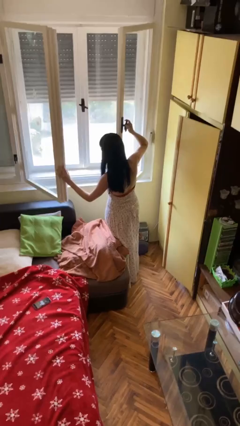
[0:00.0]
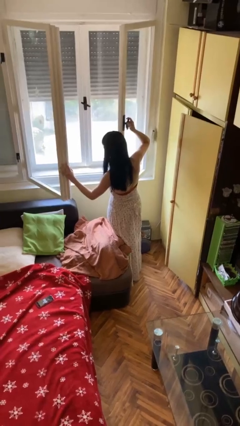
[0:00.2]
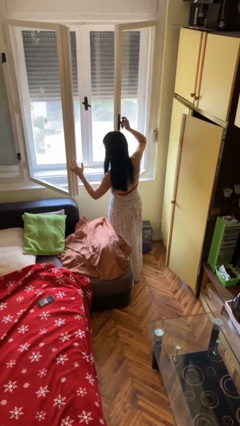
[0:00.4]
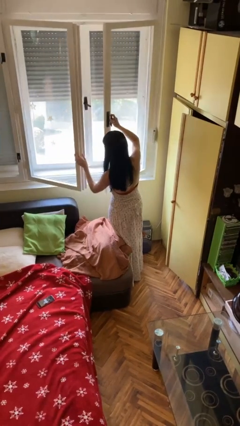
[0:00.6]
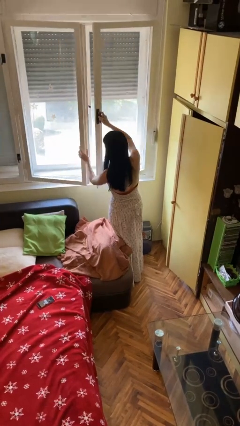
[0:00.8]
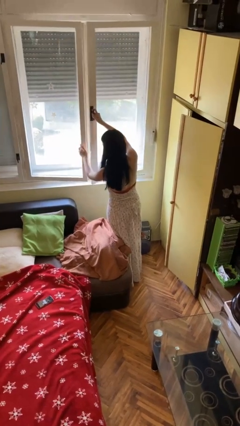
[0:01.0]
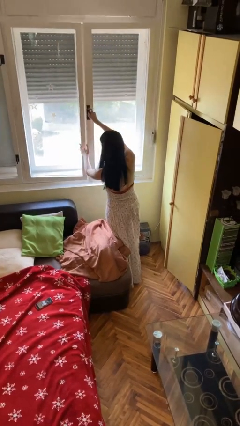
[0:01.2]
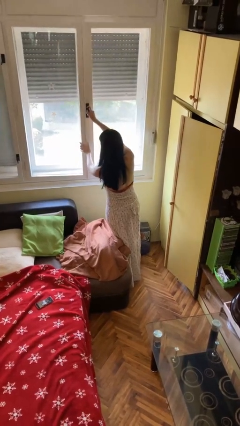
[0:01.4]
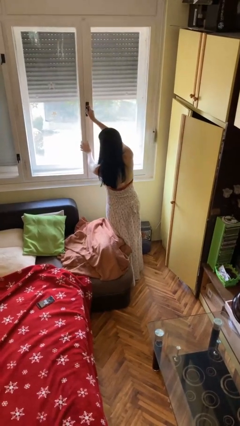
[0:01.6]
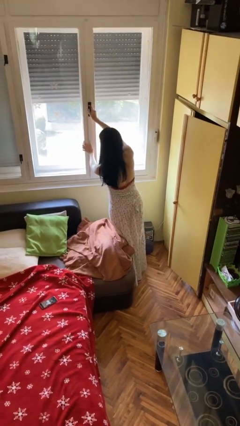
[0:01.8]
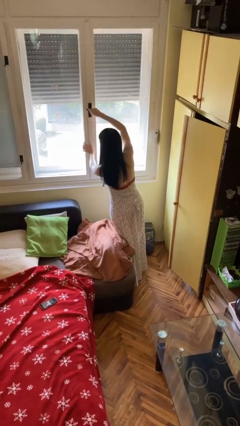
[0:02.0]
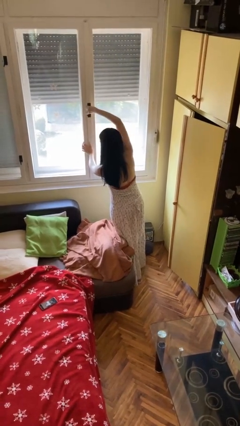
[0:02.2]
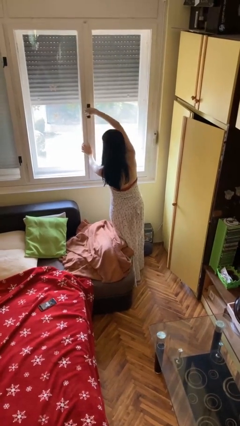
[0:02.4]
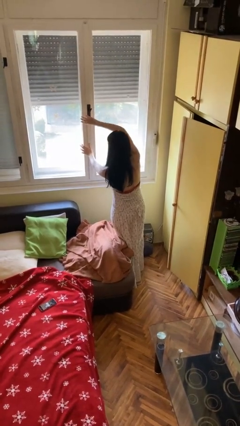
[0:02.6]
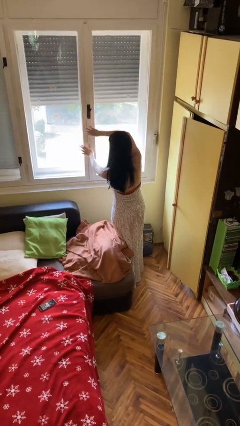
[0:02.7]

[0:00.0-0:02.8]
person closes microwave

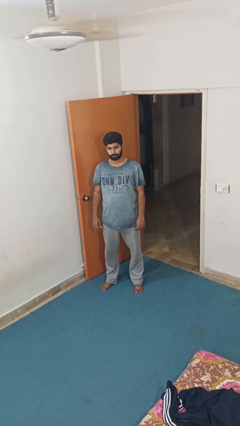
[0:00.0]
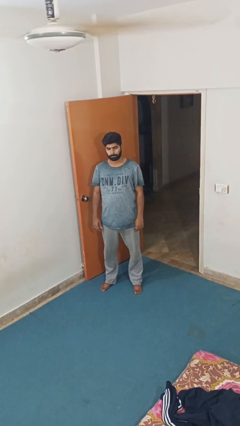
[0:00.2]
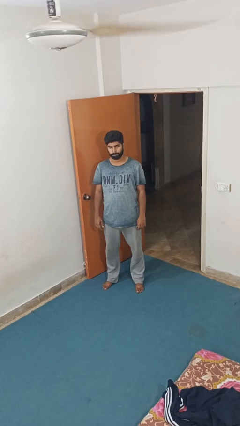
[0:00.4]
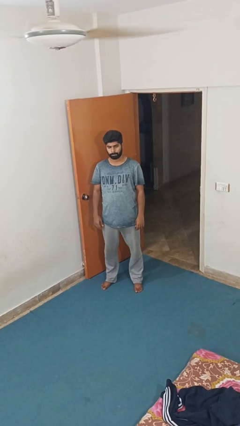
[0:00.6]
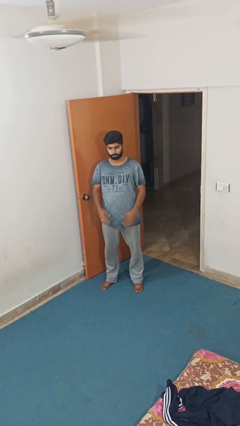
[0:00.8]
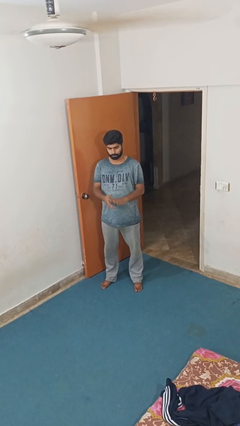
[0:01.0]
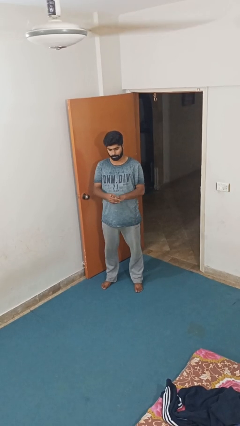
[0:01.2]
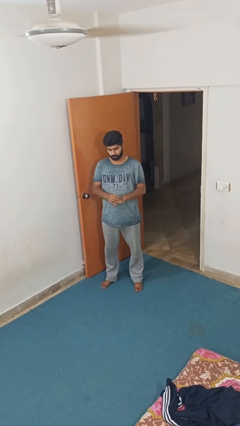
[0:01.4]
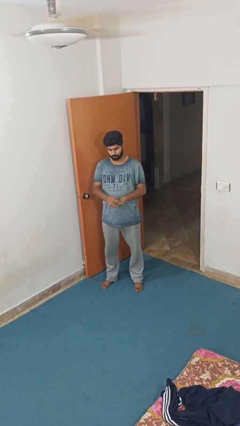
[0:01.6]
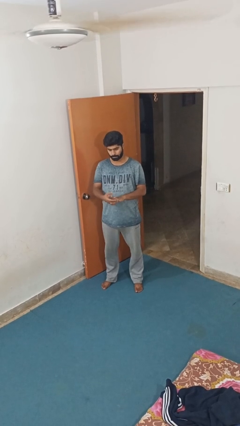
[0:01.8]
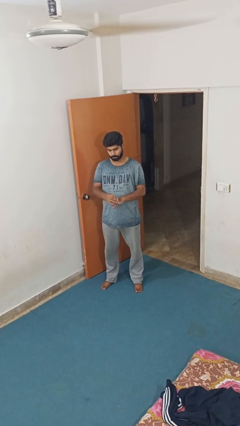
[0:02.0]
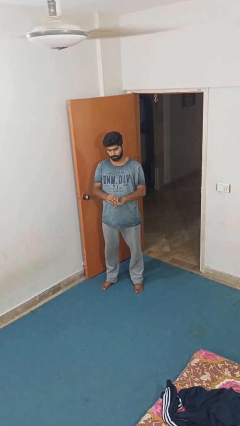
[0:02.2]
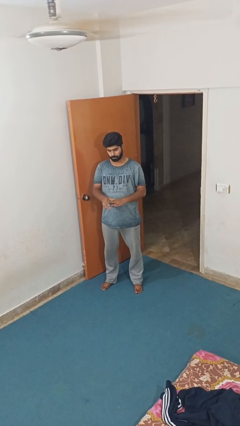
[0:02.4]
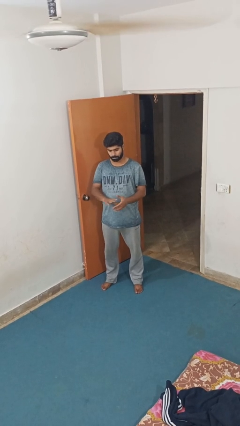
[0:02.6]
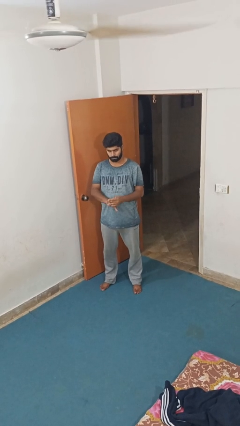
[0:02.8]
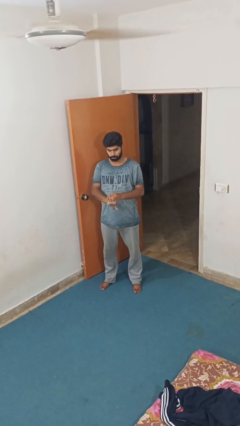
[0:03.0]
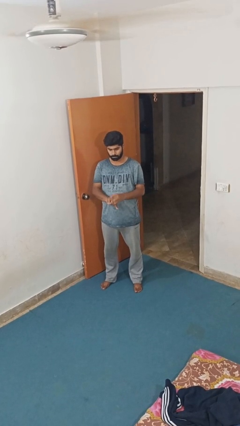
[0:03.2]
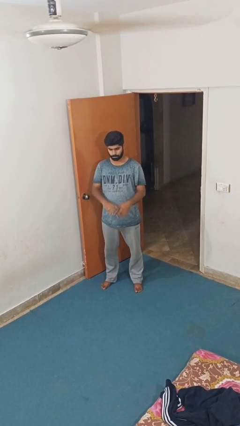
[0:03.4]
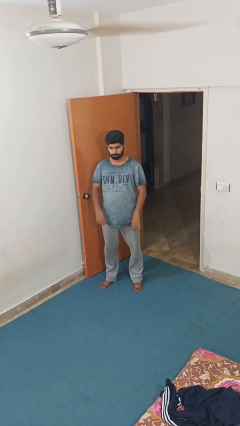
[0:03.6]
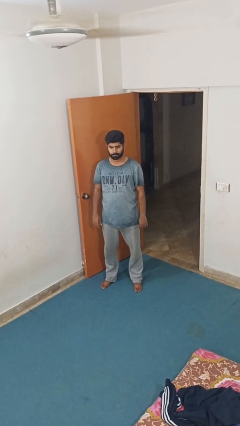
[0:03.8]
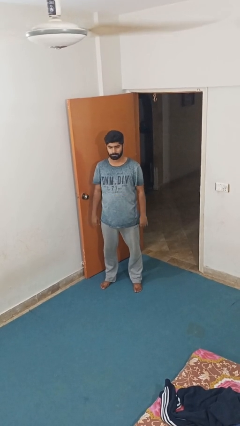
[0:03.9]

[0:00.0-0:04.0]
person snaps fingers

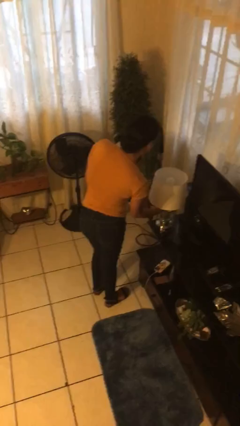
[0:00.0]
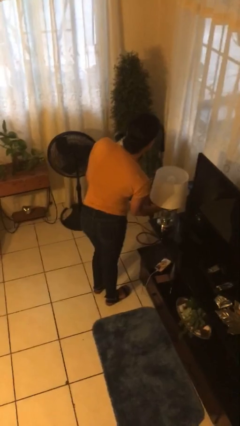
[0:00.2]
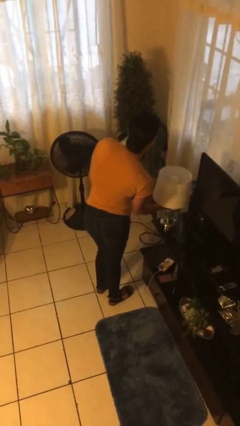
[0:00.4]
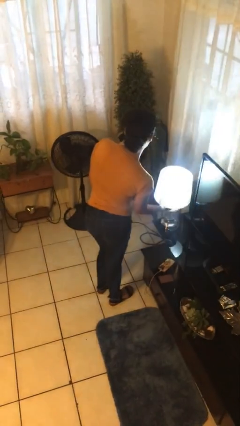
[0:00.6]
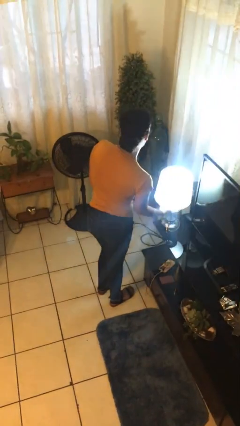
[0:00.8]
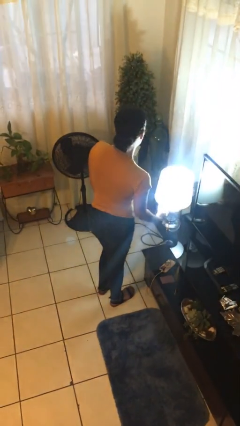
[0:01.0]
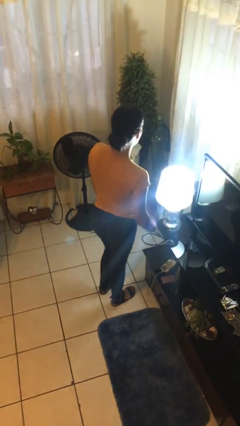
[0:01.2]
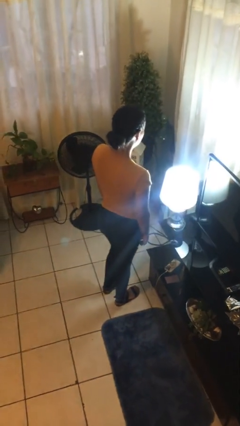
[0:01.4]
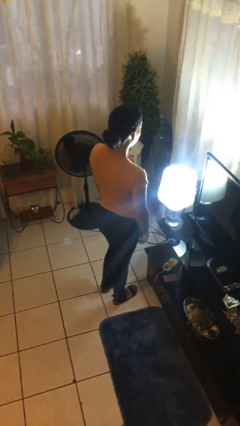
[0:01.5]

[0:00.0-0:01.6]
person turns on lamp

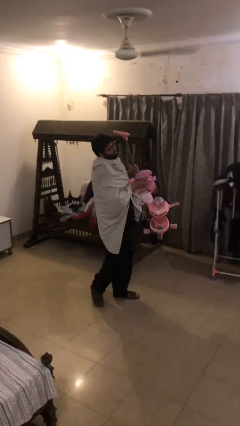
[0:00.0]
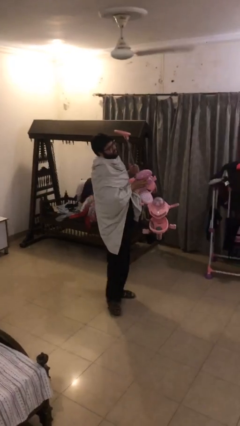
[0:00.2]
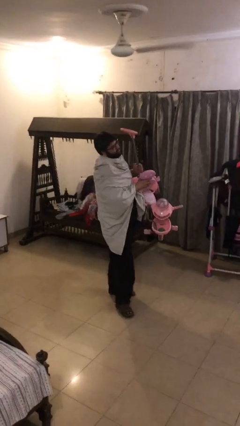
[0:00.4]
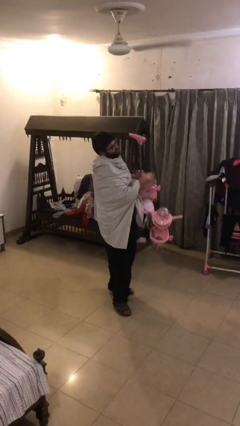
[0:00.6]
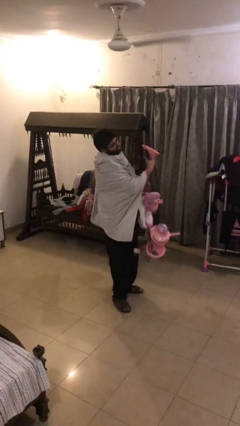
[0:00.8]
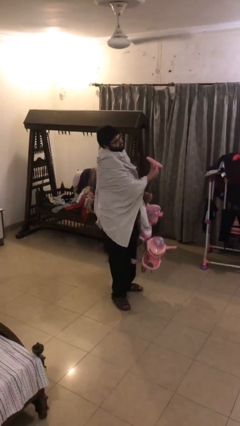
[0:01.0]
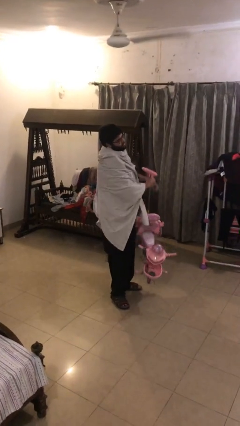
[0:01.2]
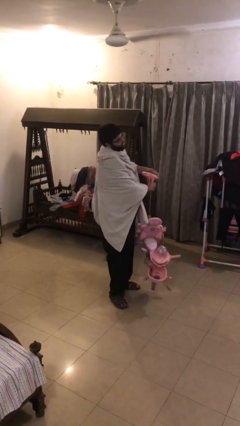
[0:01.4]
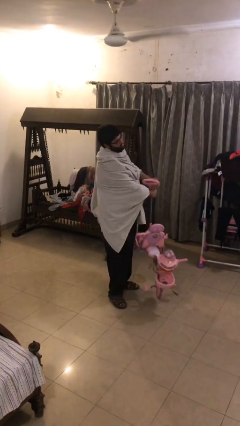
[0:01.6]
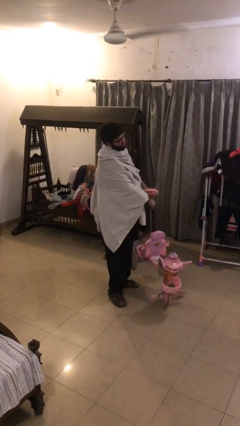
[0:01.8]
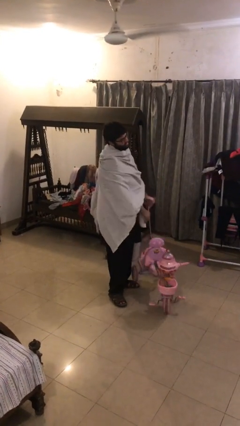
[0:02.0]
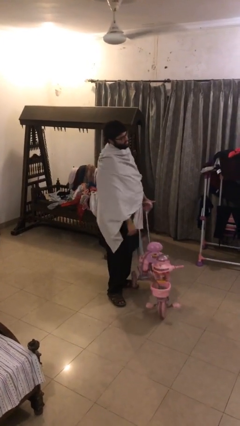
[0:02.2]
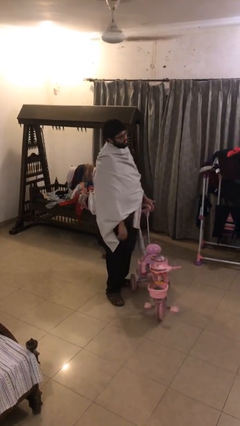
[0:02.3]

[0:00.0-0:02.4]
person puts down object on floor

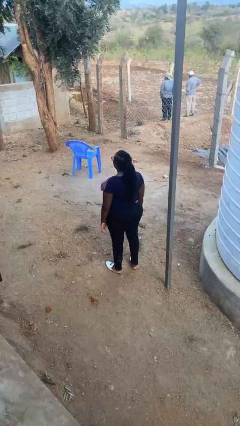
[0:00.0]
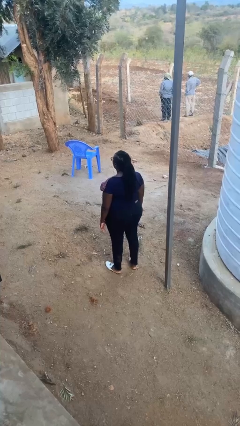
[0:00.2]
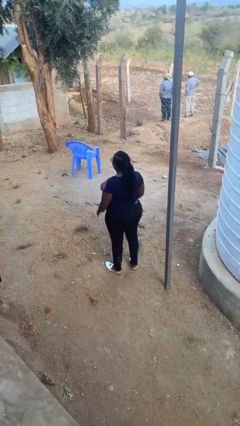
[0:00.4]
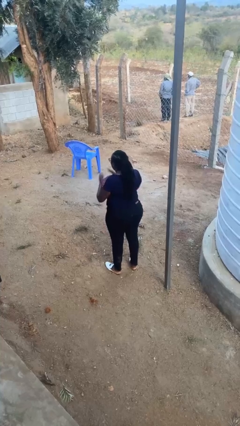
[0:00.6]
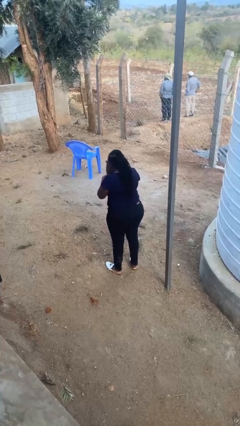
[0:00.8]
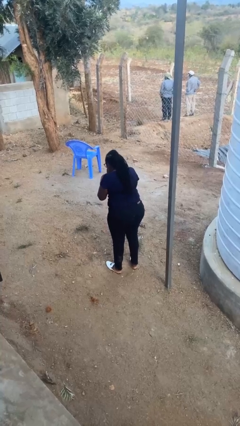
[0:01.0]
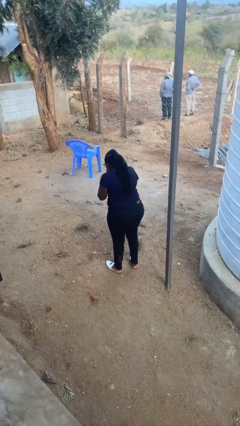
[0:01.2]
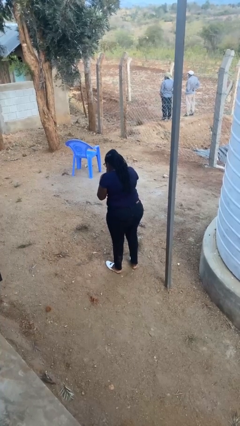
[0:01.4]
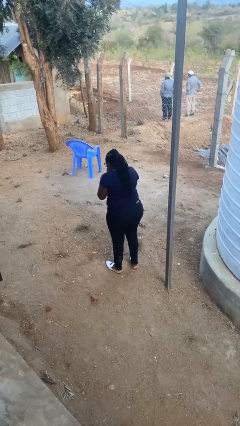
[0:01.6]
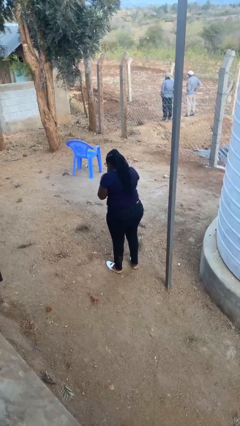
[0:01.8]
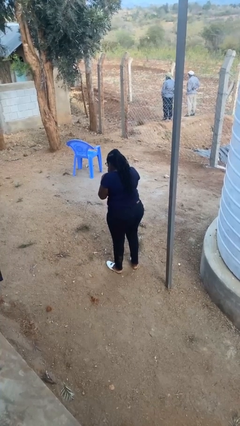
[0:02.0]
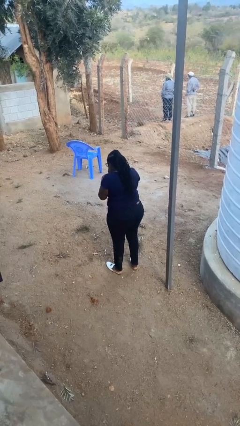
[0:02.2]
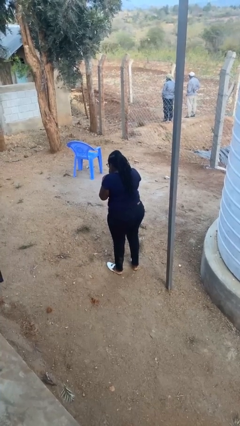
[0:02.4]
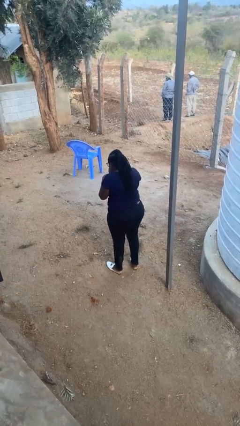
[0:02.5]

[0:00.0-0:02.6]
person sneezes into hand

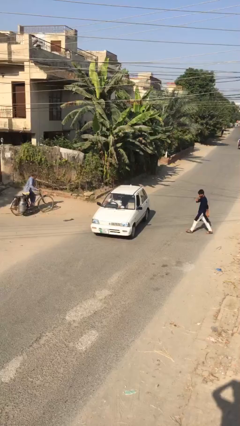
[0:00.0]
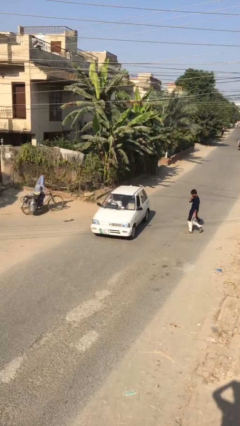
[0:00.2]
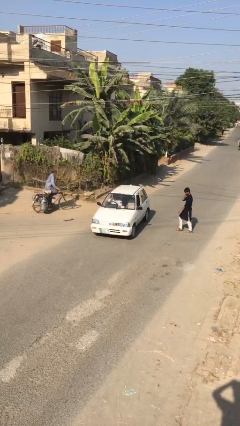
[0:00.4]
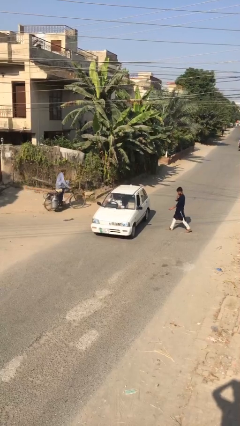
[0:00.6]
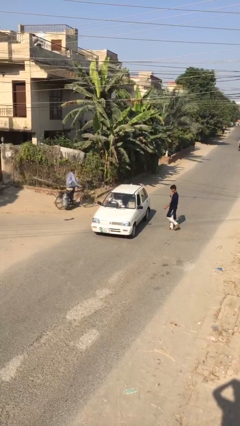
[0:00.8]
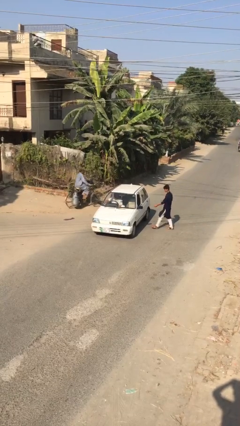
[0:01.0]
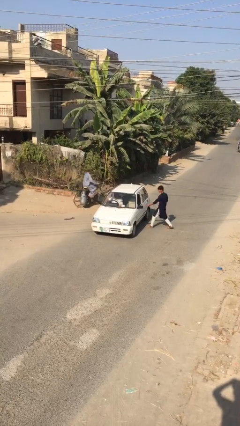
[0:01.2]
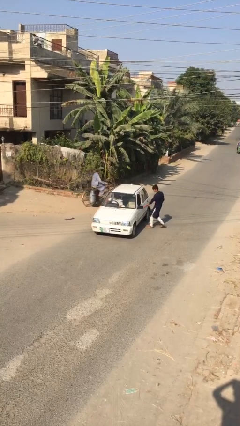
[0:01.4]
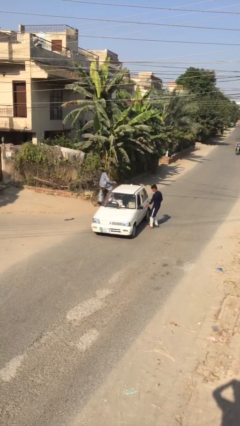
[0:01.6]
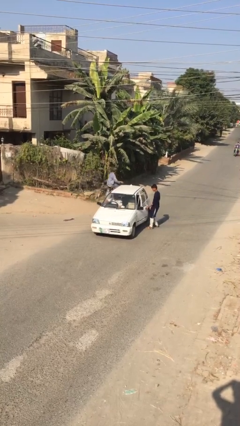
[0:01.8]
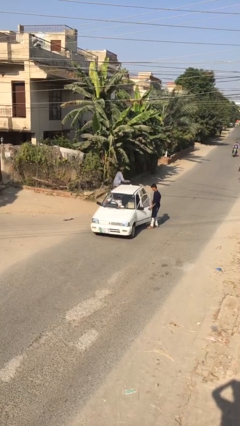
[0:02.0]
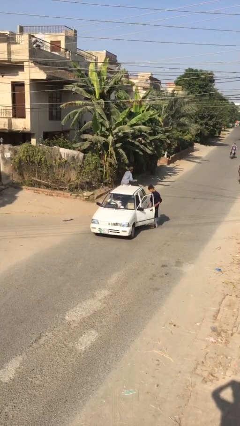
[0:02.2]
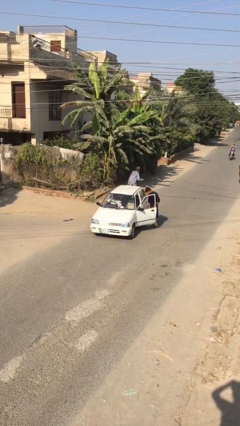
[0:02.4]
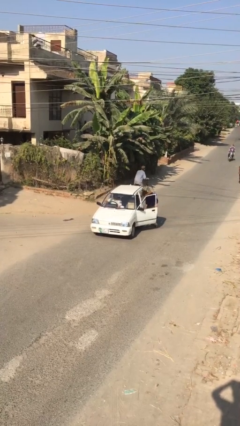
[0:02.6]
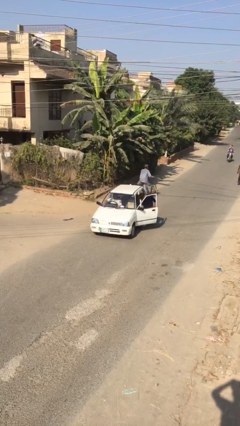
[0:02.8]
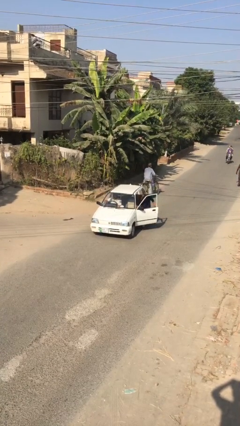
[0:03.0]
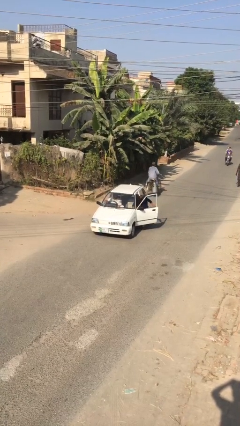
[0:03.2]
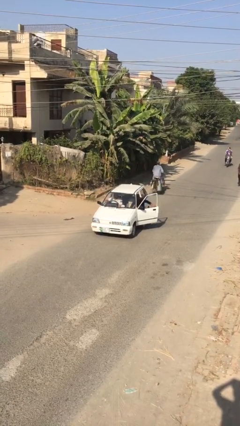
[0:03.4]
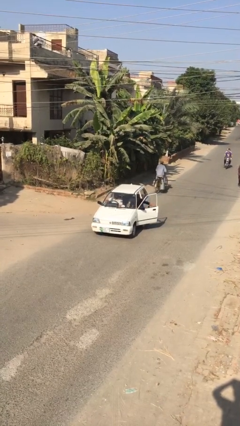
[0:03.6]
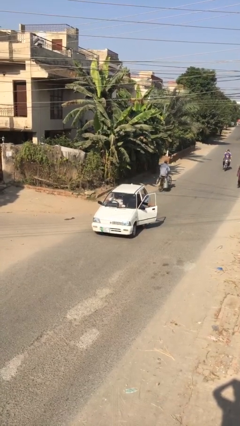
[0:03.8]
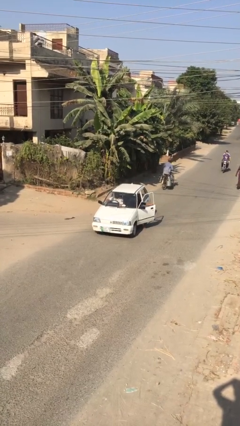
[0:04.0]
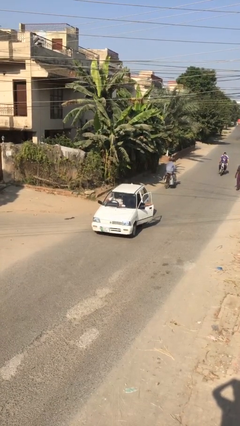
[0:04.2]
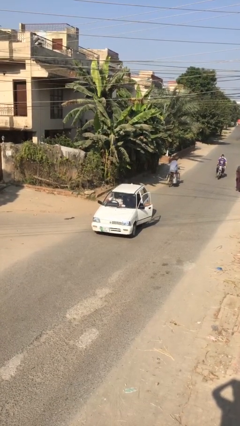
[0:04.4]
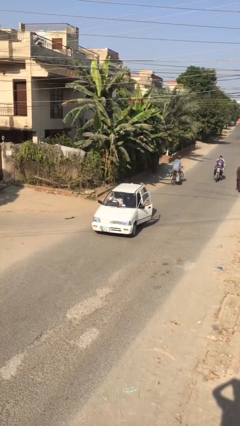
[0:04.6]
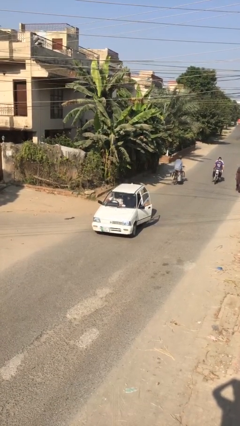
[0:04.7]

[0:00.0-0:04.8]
car picks up person
